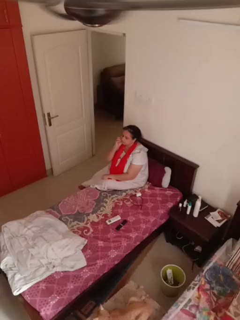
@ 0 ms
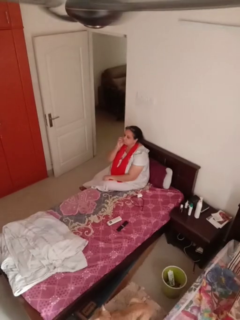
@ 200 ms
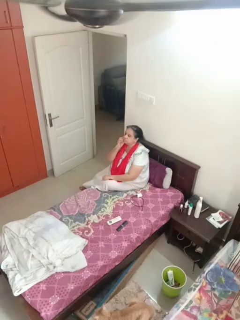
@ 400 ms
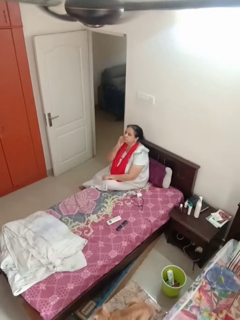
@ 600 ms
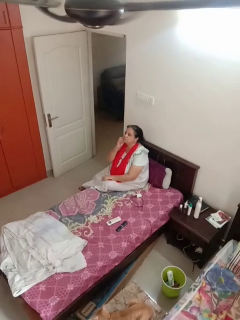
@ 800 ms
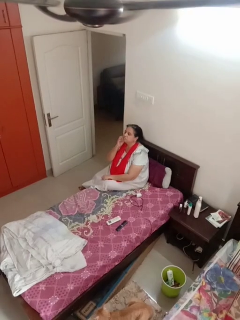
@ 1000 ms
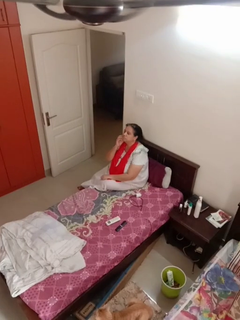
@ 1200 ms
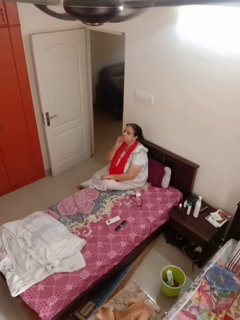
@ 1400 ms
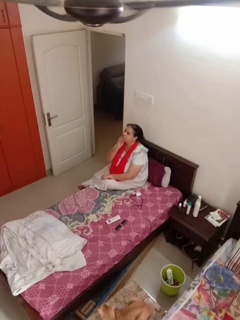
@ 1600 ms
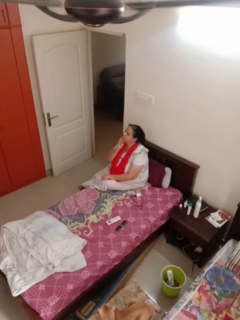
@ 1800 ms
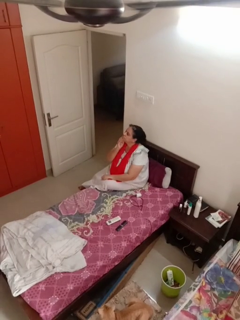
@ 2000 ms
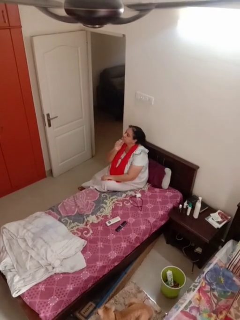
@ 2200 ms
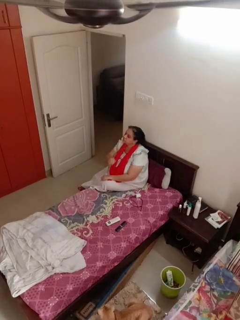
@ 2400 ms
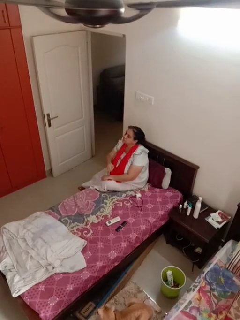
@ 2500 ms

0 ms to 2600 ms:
person scratches face

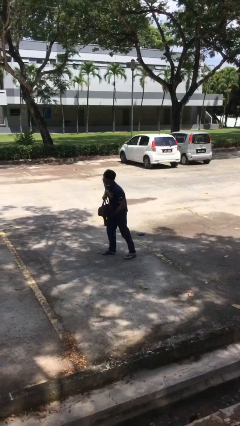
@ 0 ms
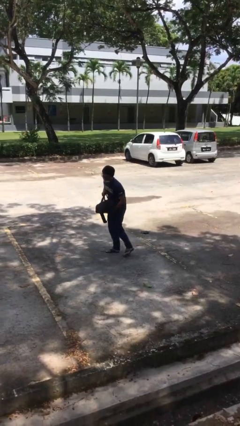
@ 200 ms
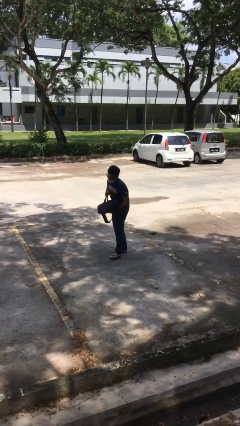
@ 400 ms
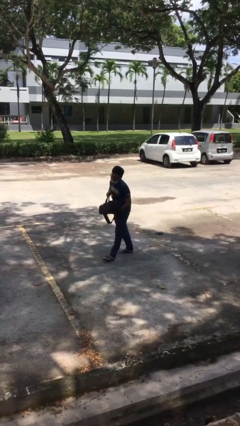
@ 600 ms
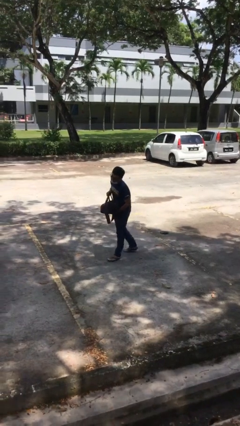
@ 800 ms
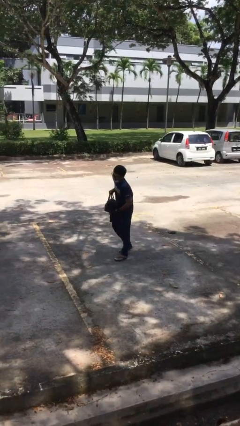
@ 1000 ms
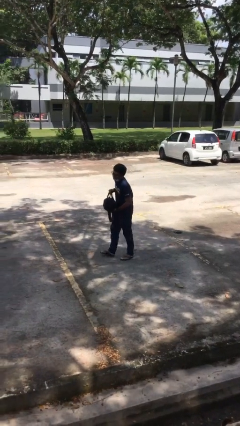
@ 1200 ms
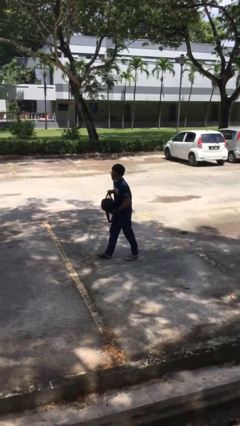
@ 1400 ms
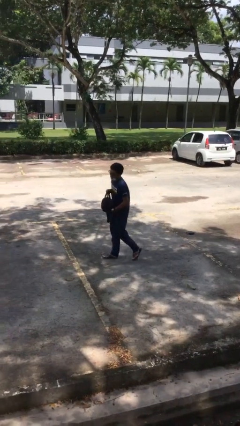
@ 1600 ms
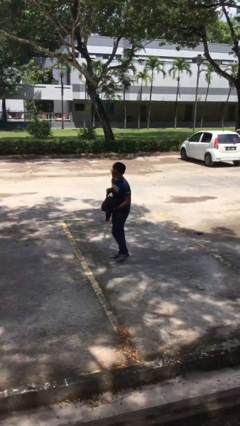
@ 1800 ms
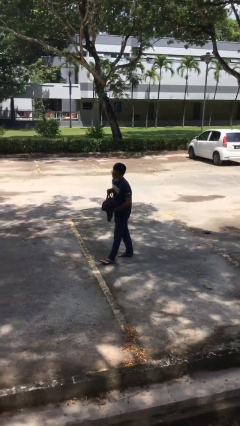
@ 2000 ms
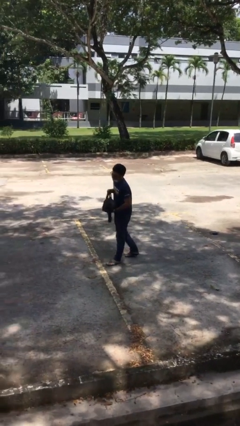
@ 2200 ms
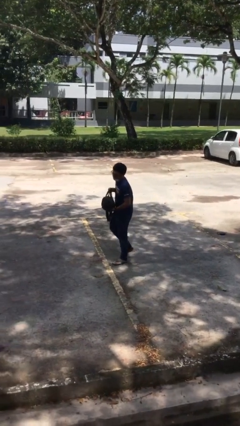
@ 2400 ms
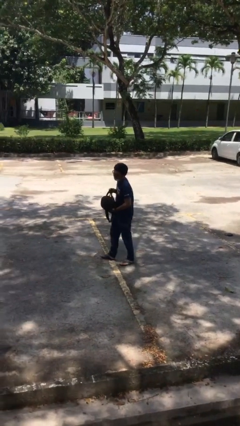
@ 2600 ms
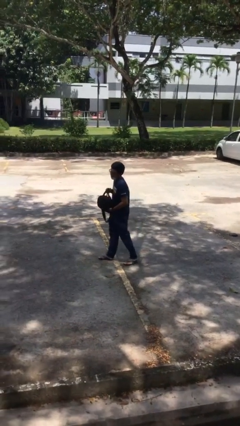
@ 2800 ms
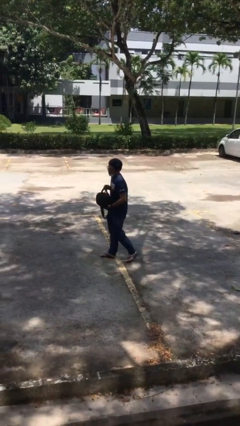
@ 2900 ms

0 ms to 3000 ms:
person carries heavy object

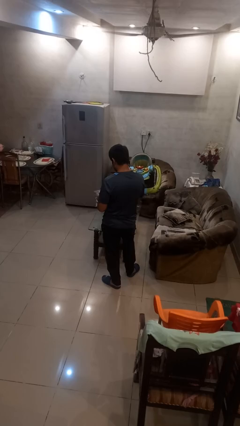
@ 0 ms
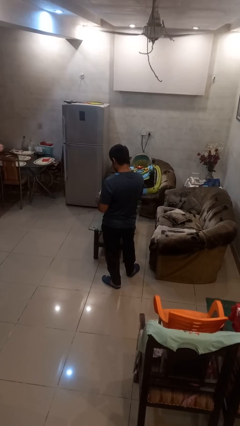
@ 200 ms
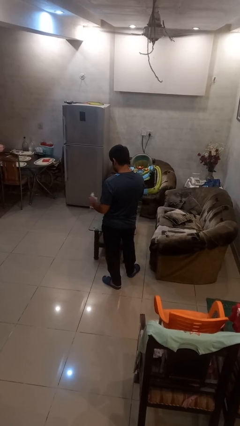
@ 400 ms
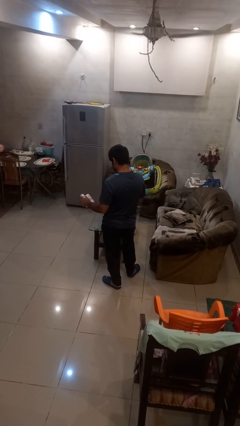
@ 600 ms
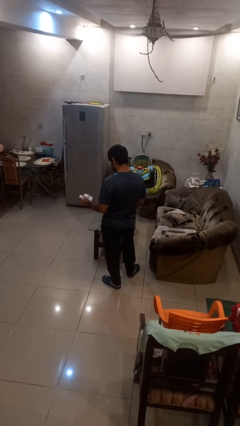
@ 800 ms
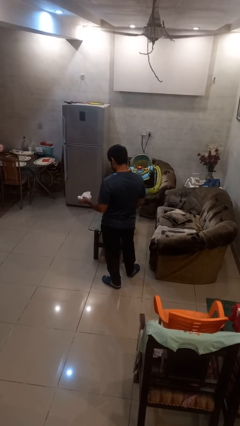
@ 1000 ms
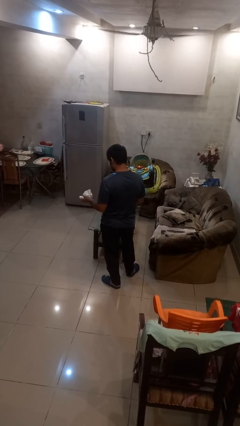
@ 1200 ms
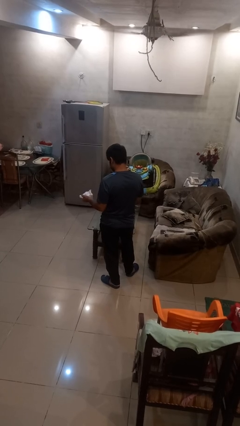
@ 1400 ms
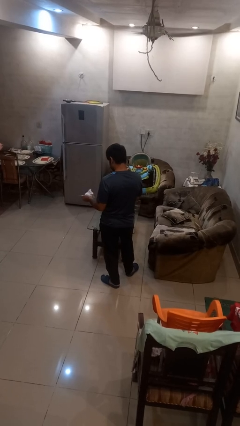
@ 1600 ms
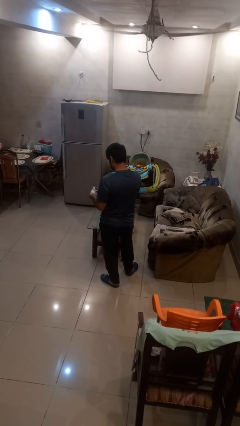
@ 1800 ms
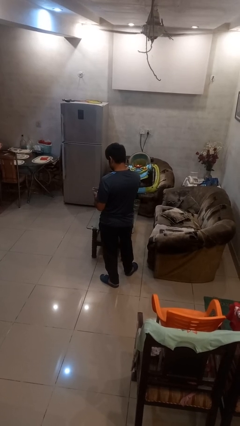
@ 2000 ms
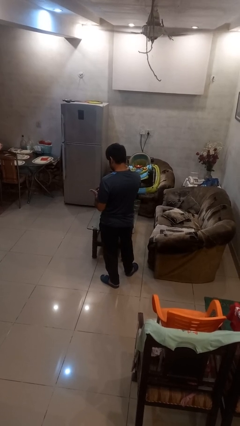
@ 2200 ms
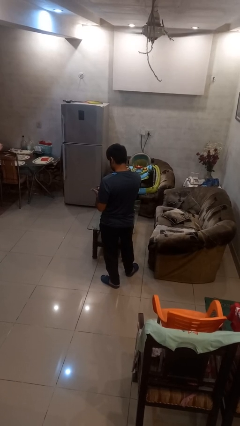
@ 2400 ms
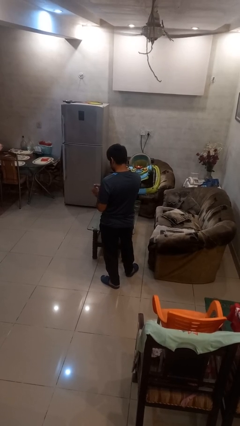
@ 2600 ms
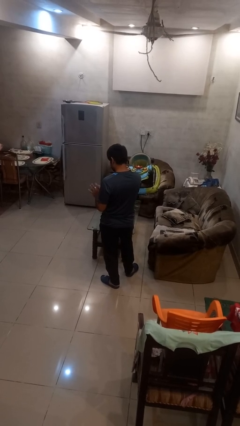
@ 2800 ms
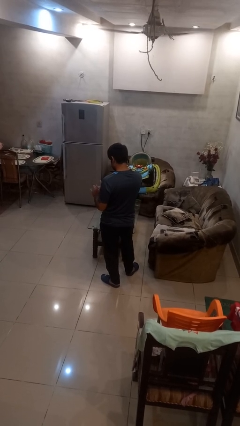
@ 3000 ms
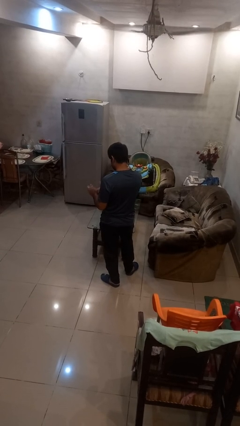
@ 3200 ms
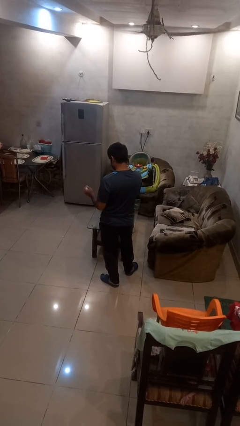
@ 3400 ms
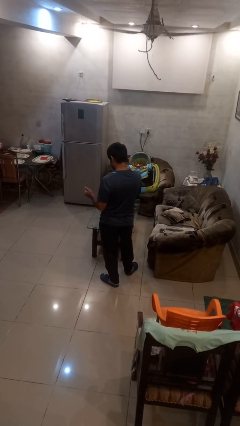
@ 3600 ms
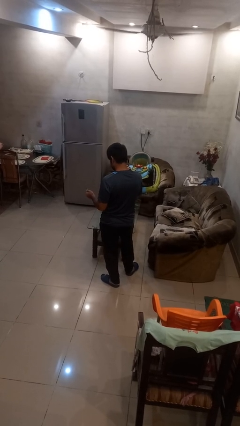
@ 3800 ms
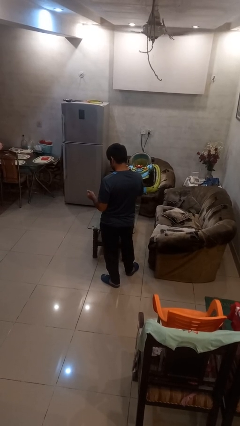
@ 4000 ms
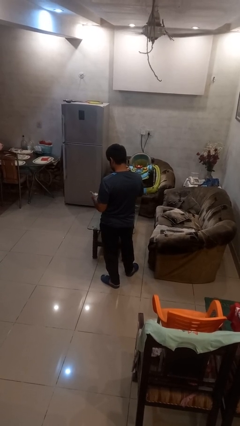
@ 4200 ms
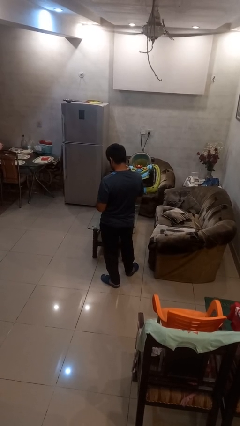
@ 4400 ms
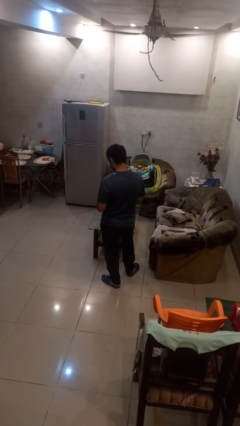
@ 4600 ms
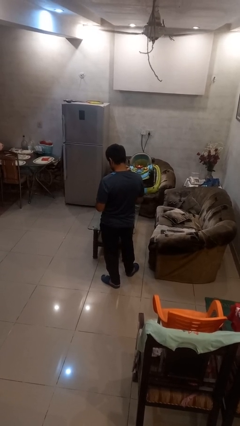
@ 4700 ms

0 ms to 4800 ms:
person crumples paper

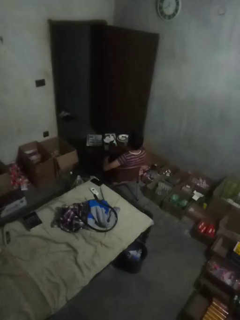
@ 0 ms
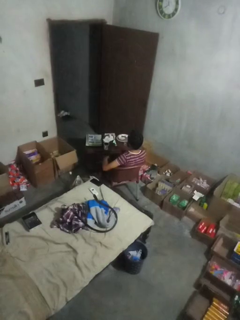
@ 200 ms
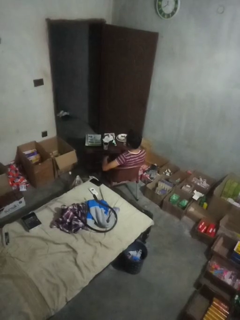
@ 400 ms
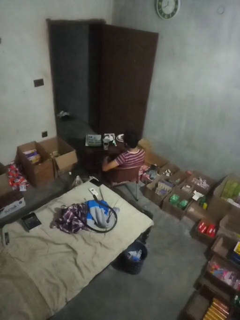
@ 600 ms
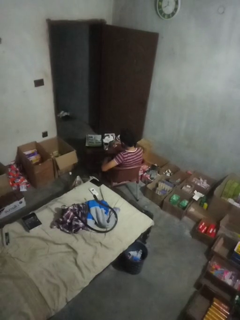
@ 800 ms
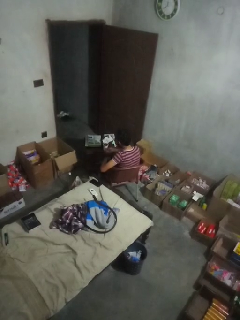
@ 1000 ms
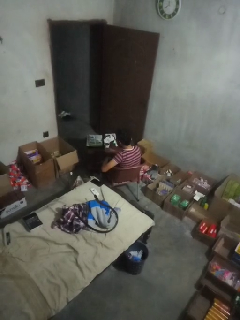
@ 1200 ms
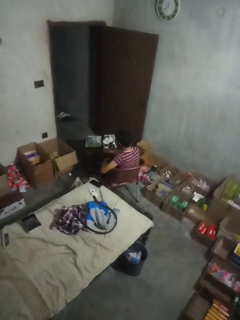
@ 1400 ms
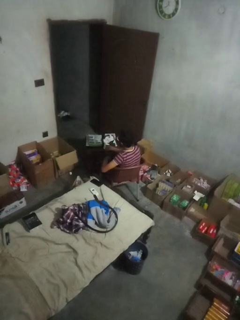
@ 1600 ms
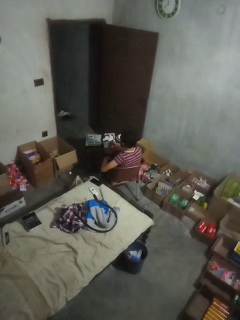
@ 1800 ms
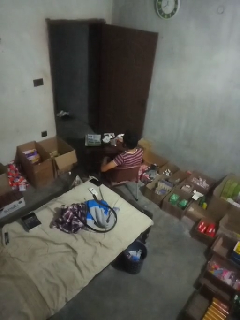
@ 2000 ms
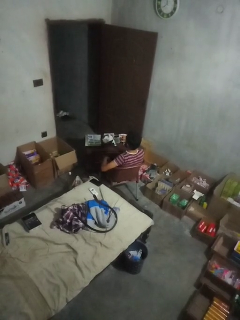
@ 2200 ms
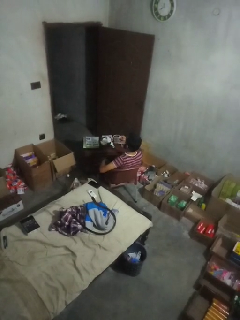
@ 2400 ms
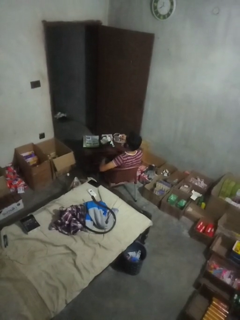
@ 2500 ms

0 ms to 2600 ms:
person picks up object from table

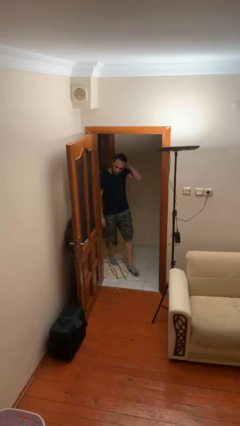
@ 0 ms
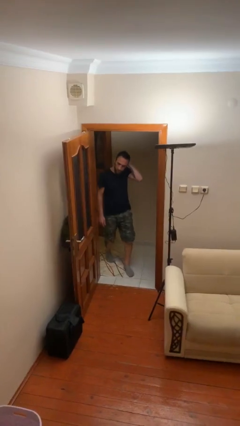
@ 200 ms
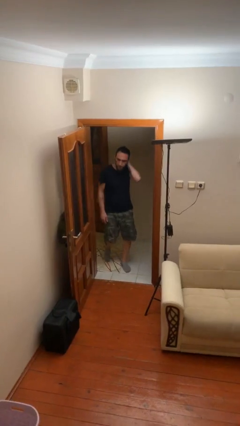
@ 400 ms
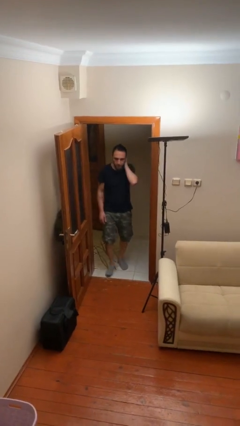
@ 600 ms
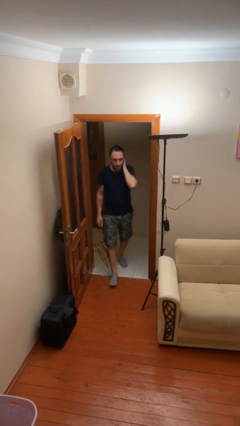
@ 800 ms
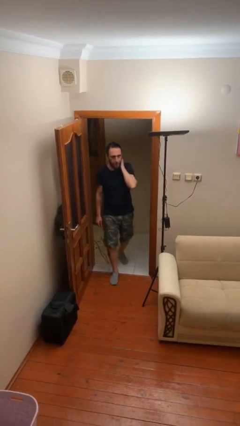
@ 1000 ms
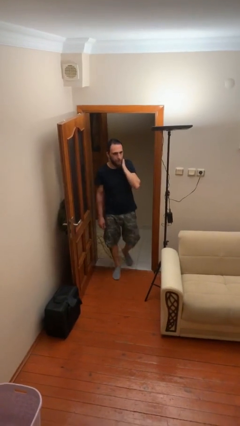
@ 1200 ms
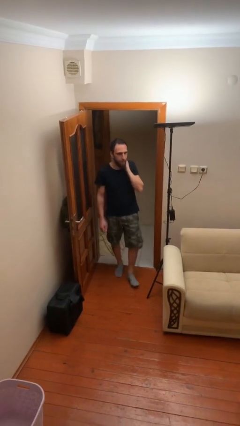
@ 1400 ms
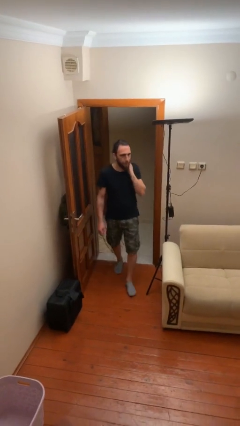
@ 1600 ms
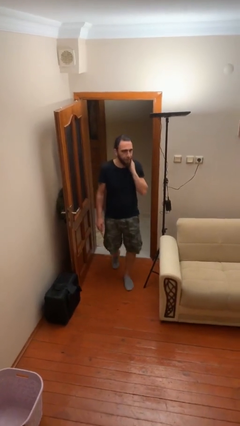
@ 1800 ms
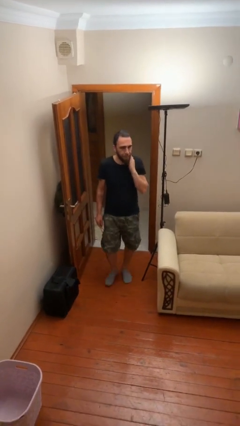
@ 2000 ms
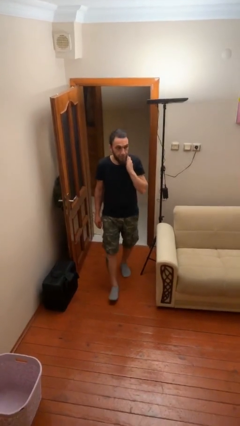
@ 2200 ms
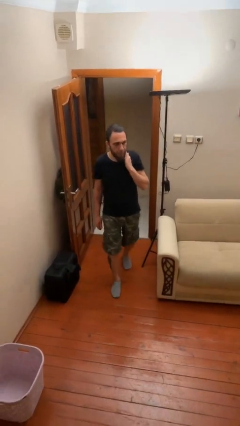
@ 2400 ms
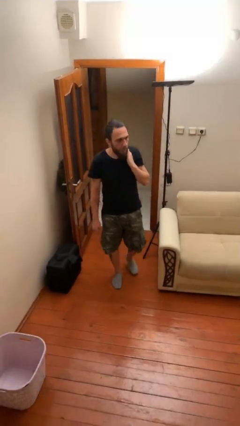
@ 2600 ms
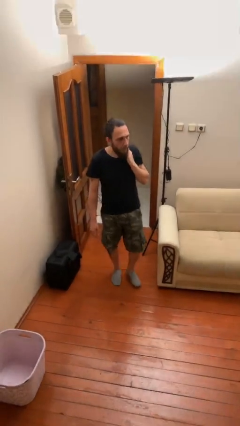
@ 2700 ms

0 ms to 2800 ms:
person enters scene through structure

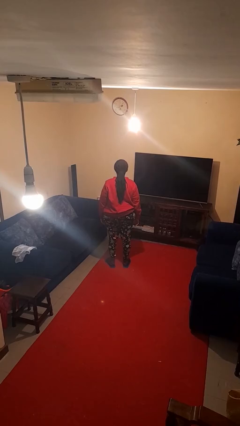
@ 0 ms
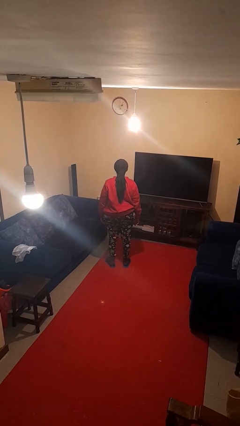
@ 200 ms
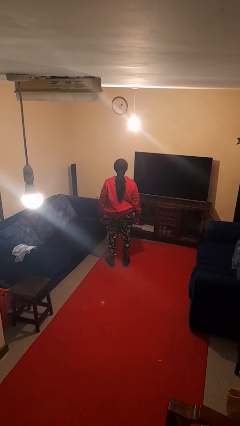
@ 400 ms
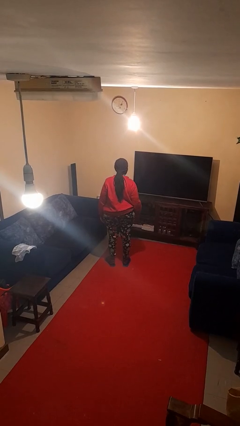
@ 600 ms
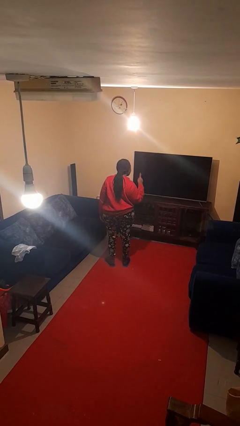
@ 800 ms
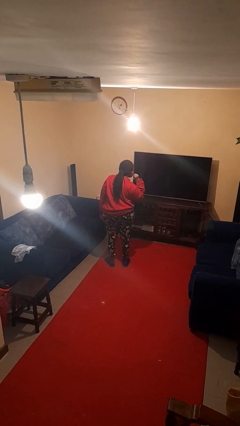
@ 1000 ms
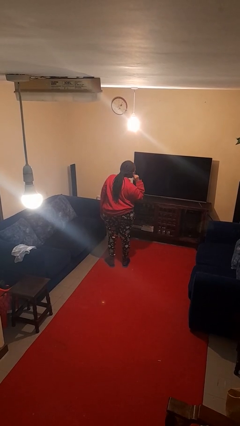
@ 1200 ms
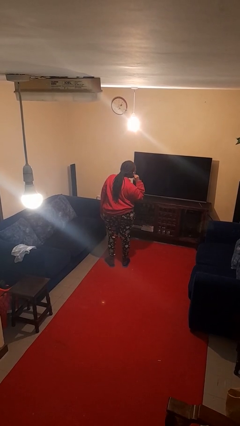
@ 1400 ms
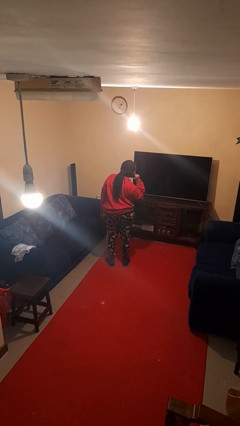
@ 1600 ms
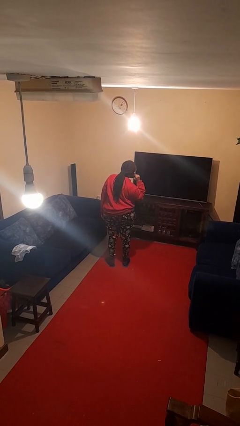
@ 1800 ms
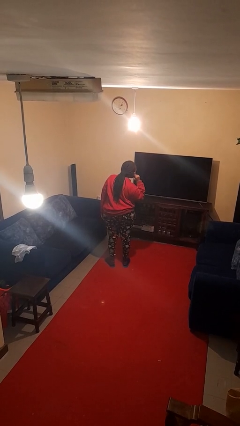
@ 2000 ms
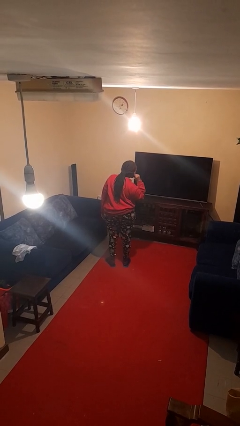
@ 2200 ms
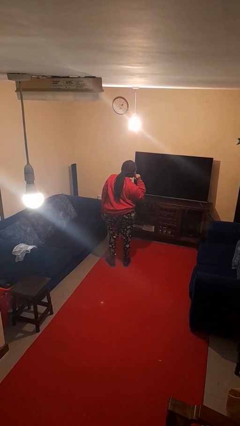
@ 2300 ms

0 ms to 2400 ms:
person gestures listen closely

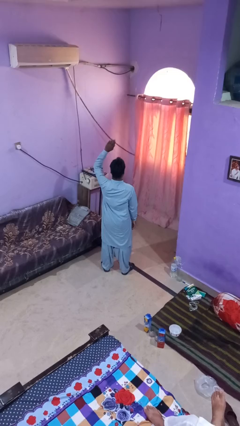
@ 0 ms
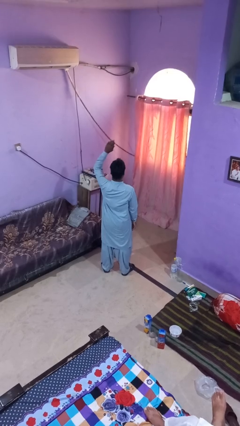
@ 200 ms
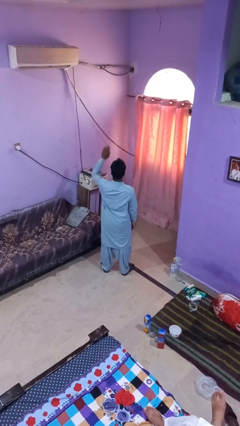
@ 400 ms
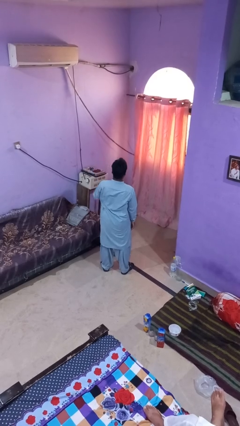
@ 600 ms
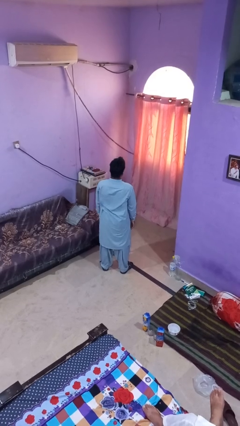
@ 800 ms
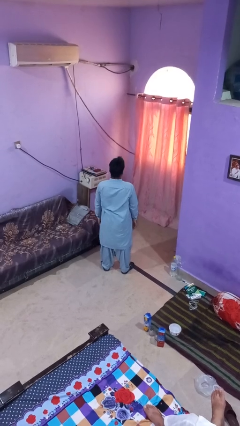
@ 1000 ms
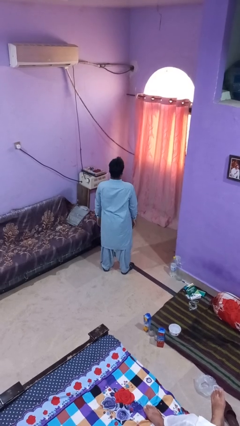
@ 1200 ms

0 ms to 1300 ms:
person gestures lower hand
